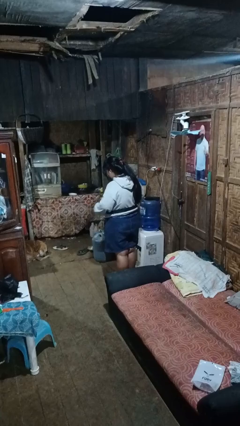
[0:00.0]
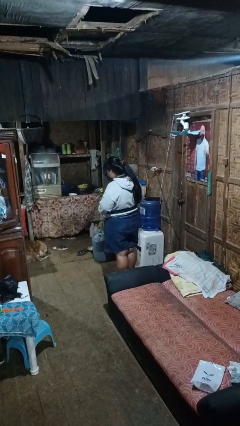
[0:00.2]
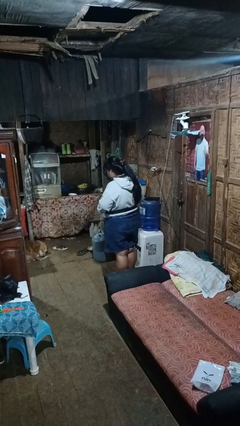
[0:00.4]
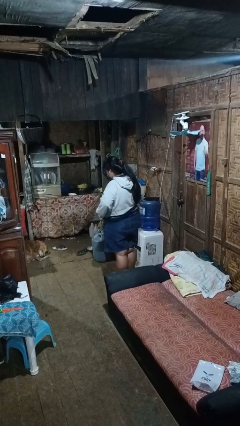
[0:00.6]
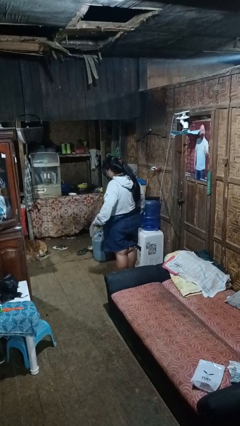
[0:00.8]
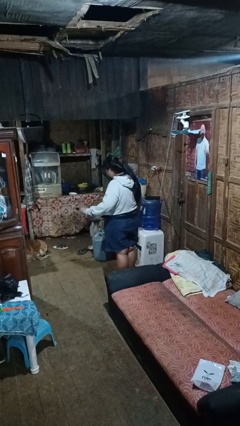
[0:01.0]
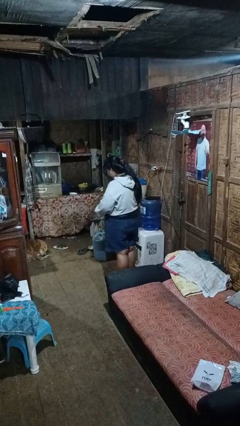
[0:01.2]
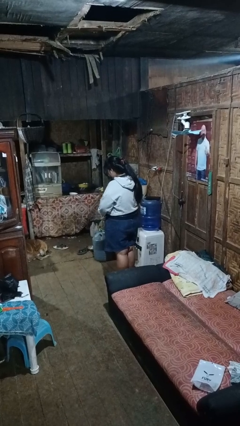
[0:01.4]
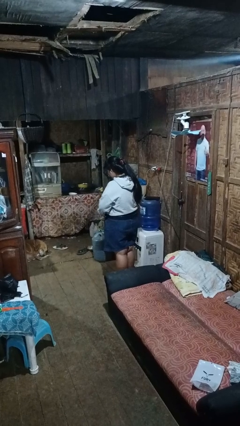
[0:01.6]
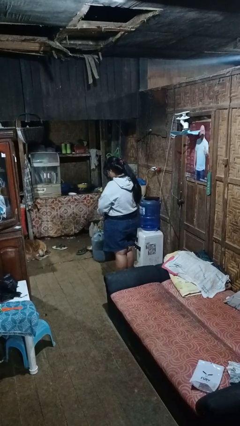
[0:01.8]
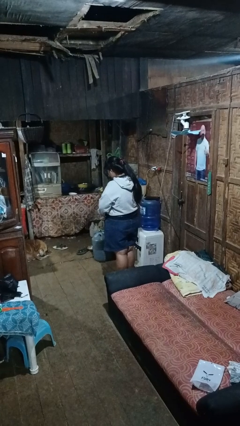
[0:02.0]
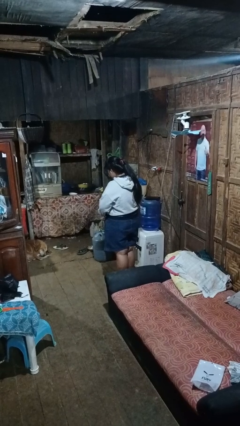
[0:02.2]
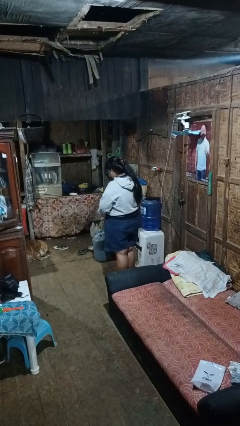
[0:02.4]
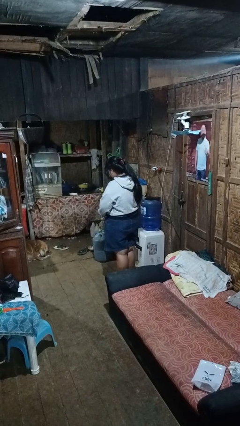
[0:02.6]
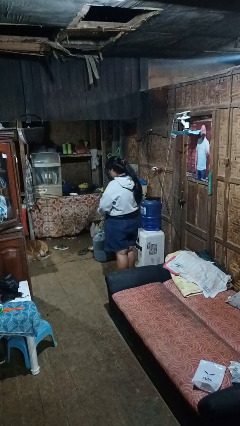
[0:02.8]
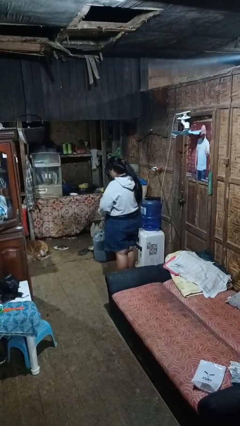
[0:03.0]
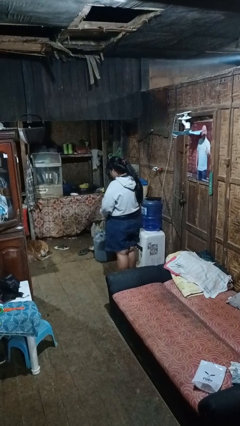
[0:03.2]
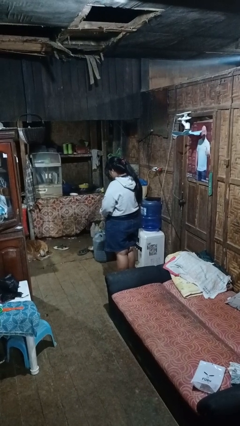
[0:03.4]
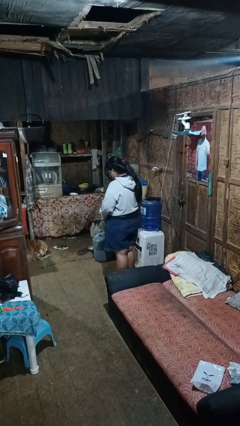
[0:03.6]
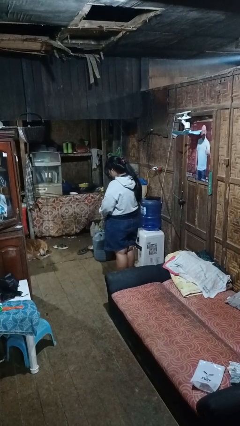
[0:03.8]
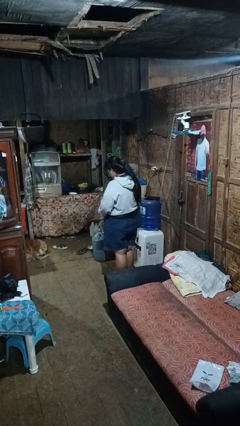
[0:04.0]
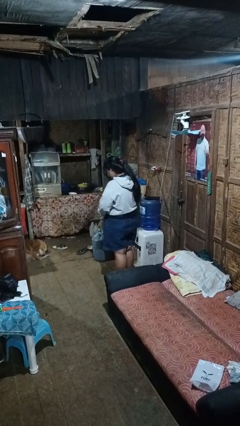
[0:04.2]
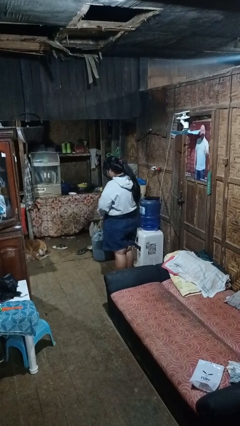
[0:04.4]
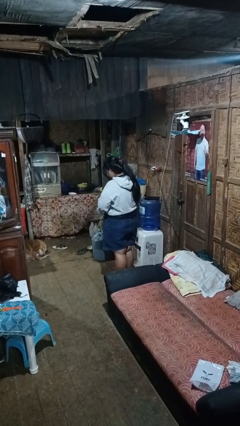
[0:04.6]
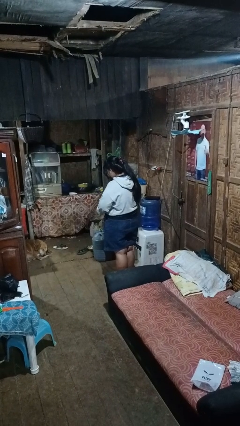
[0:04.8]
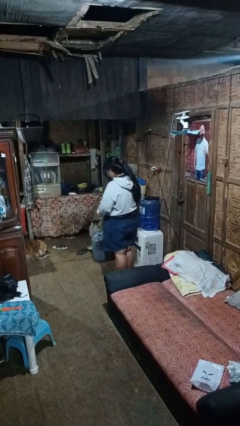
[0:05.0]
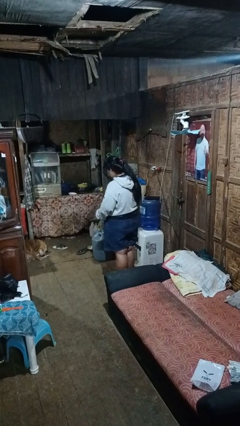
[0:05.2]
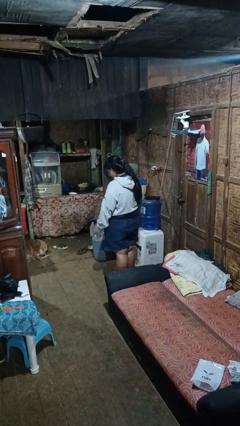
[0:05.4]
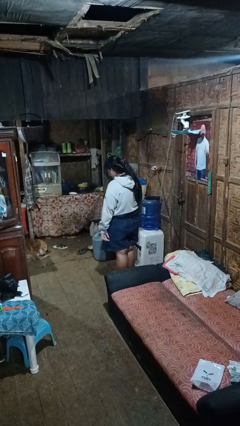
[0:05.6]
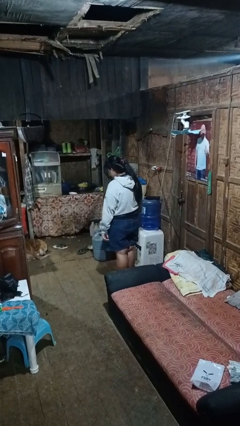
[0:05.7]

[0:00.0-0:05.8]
person puts on belt

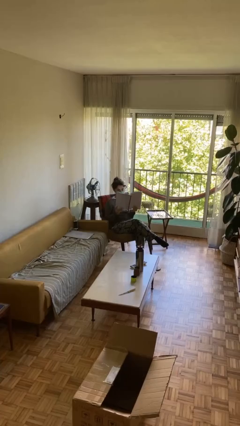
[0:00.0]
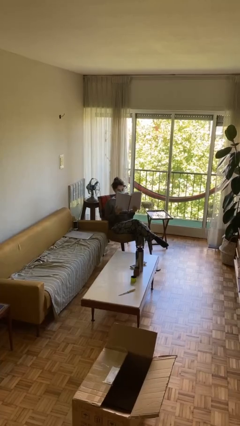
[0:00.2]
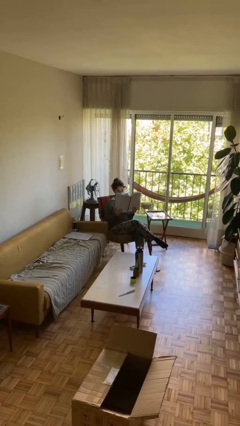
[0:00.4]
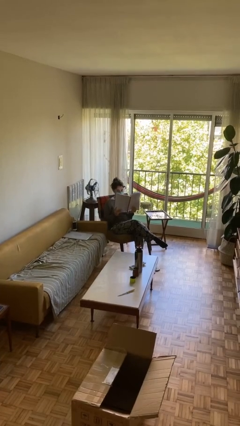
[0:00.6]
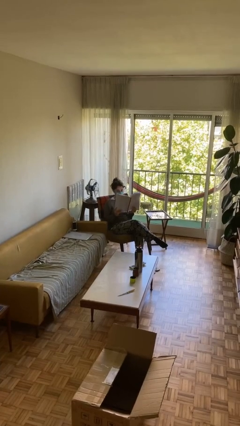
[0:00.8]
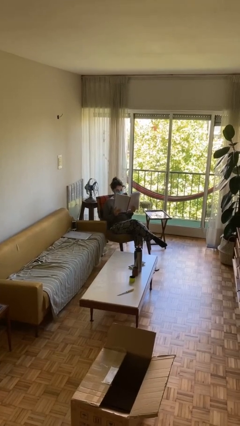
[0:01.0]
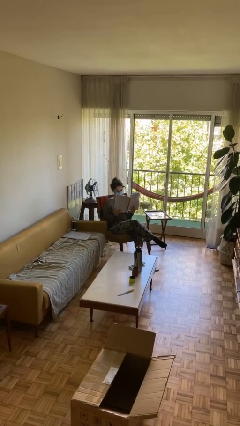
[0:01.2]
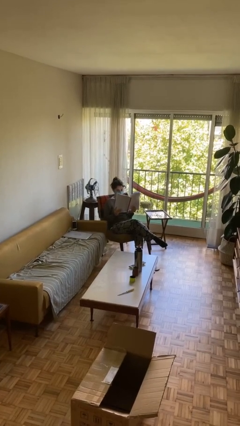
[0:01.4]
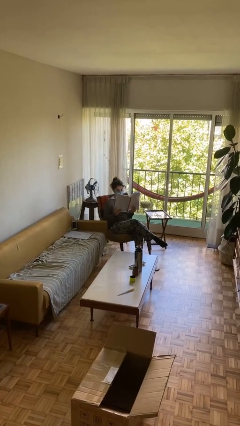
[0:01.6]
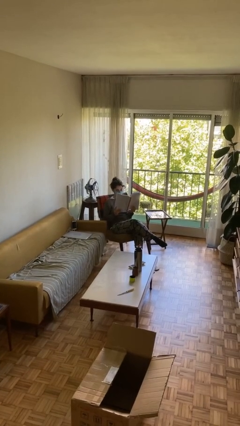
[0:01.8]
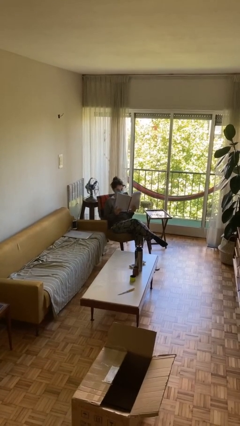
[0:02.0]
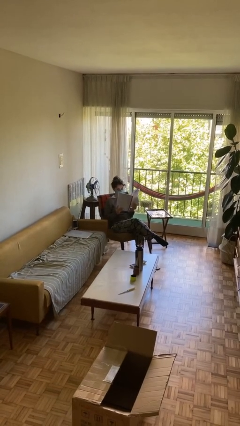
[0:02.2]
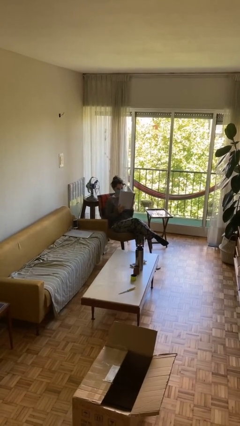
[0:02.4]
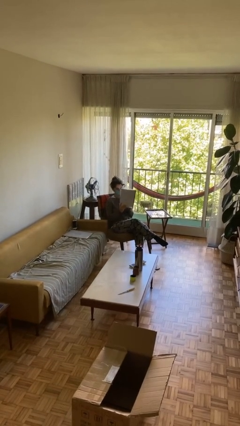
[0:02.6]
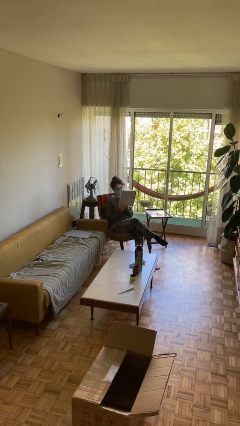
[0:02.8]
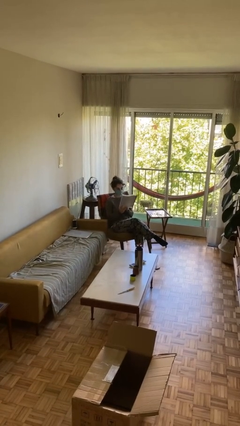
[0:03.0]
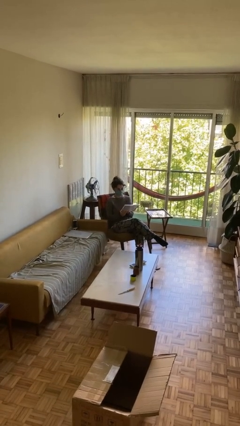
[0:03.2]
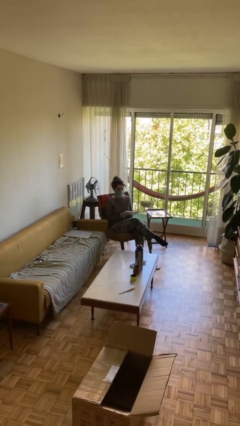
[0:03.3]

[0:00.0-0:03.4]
person reads document

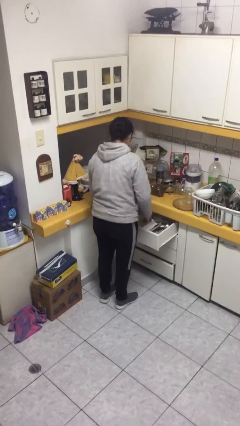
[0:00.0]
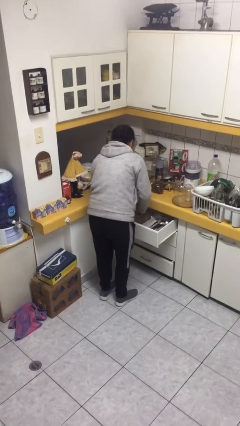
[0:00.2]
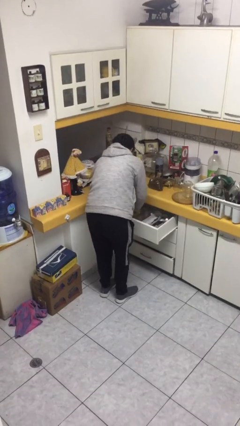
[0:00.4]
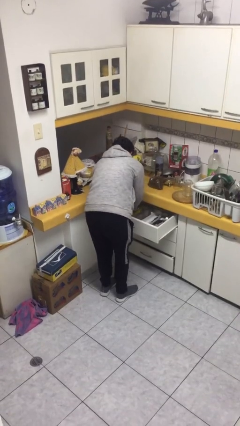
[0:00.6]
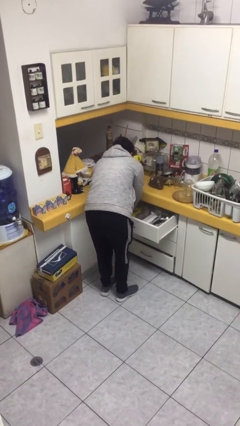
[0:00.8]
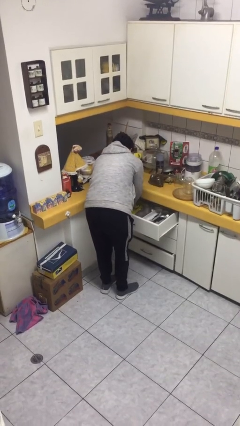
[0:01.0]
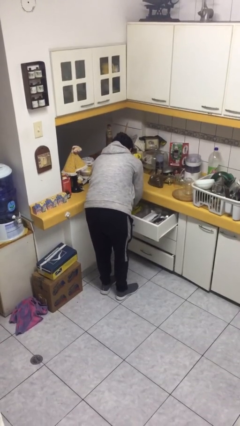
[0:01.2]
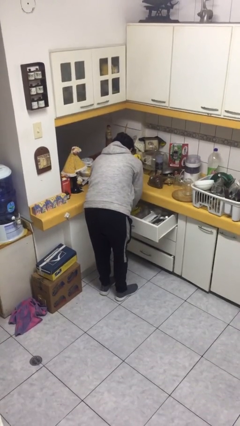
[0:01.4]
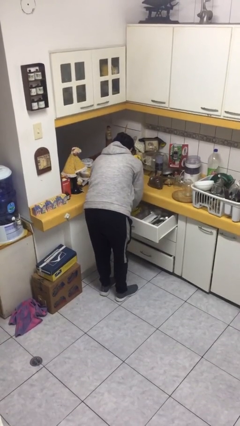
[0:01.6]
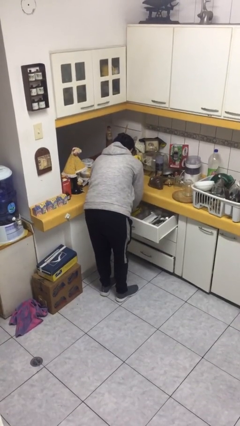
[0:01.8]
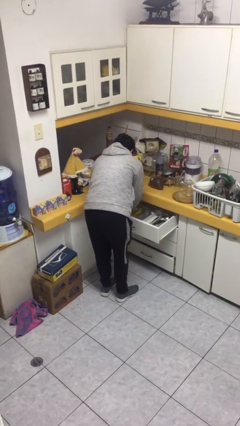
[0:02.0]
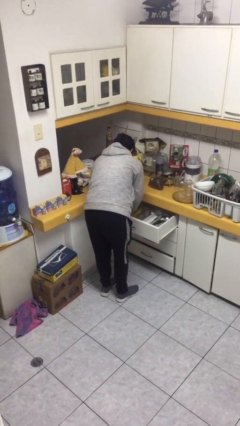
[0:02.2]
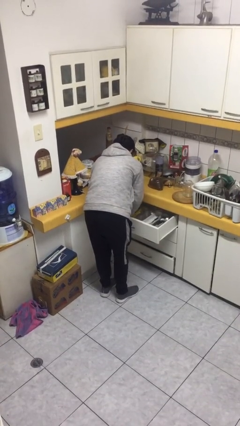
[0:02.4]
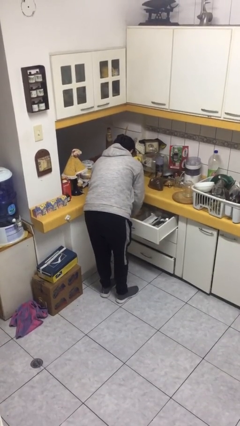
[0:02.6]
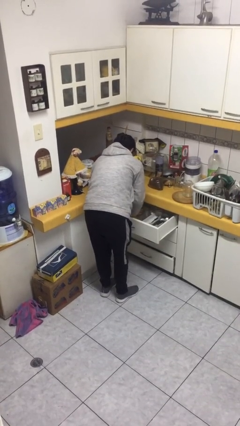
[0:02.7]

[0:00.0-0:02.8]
person searches in kitchen drawer

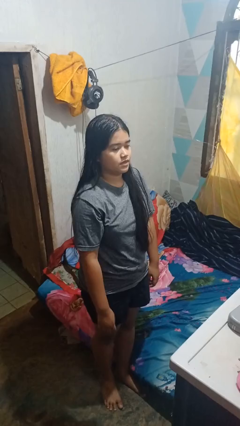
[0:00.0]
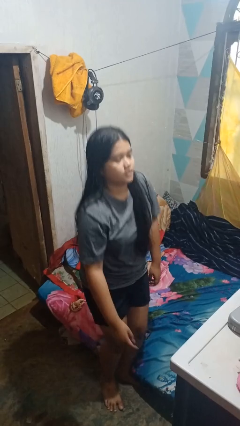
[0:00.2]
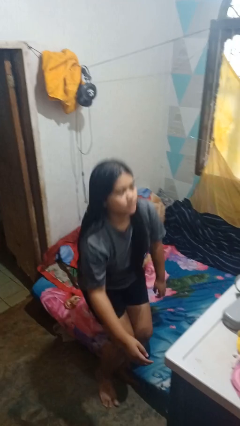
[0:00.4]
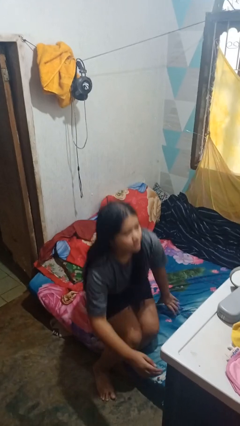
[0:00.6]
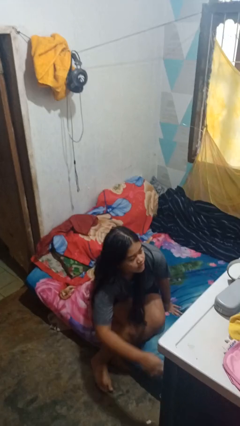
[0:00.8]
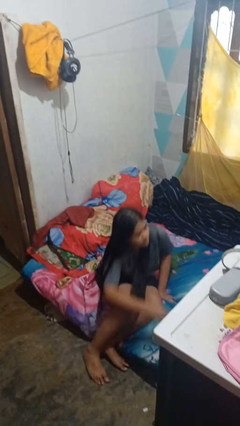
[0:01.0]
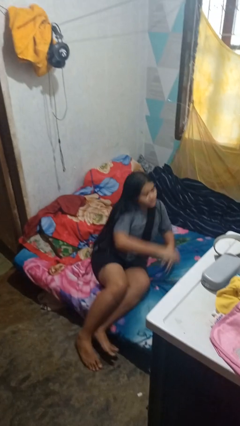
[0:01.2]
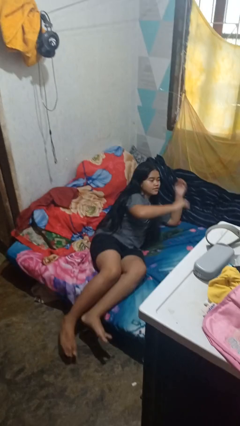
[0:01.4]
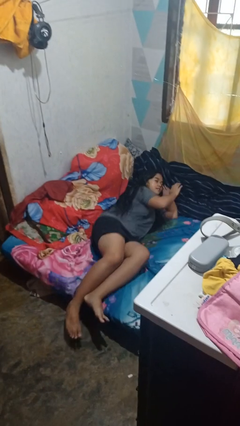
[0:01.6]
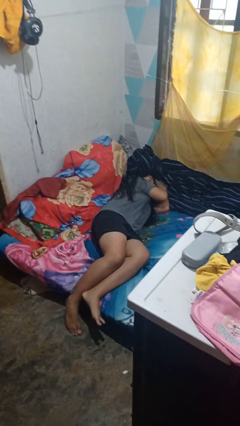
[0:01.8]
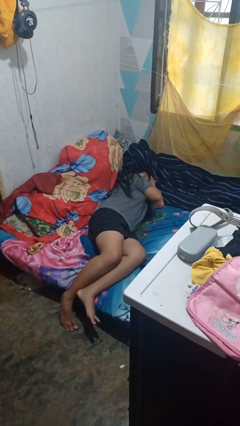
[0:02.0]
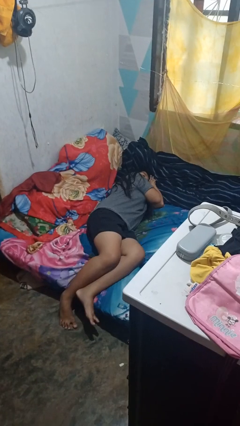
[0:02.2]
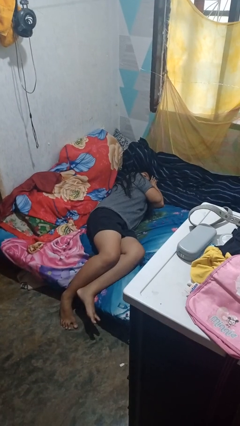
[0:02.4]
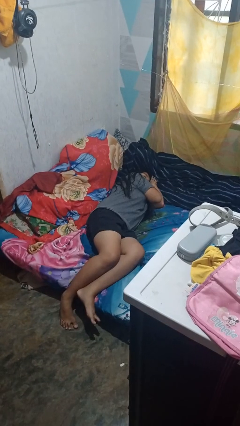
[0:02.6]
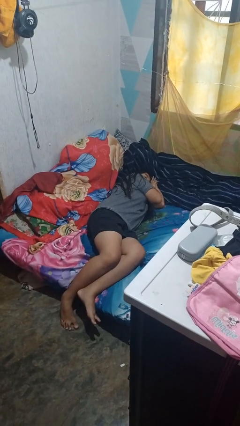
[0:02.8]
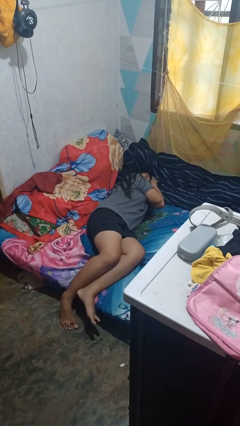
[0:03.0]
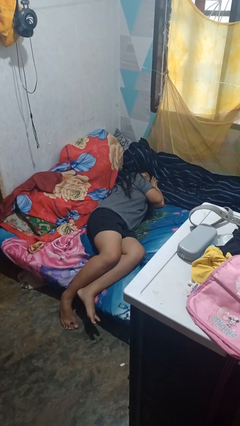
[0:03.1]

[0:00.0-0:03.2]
person lies down on bed

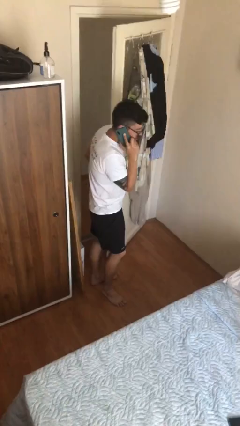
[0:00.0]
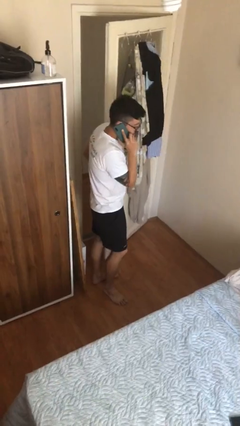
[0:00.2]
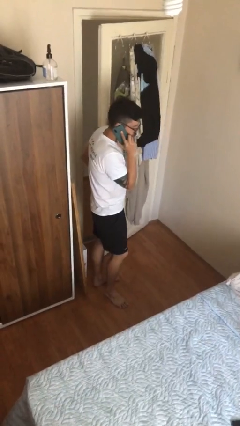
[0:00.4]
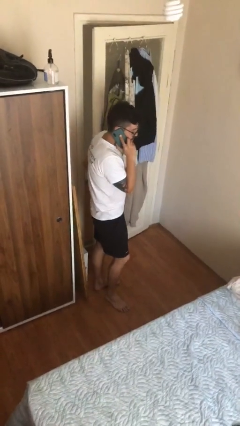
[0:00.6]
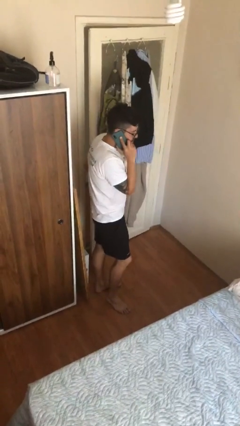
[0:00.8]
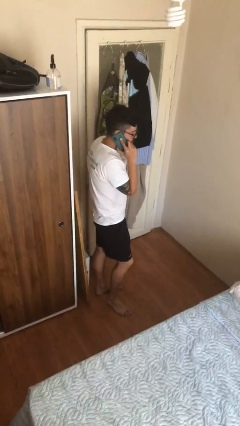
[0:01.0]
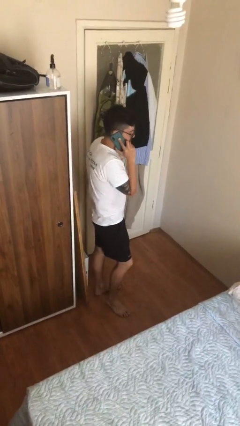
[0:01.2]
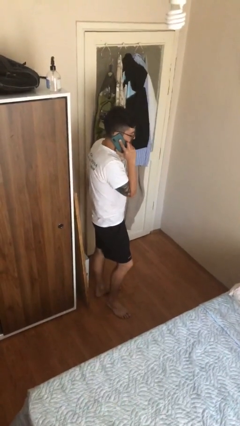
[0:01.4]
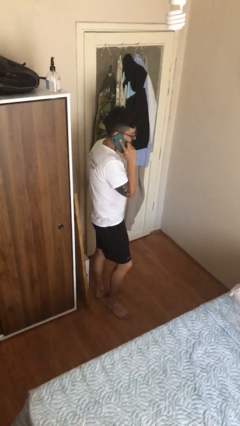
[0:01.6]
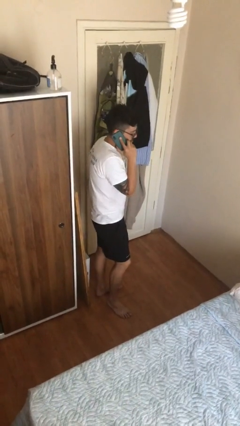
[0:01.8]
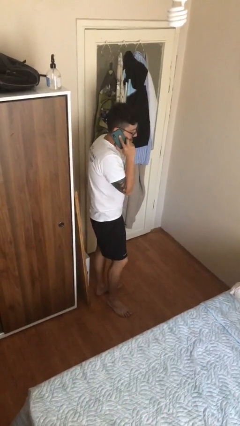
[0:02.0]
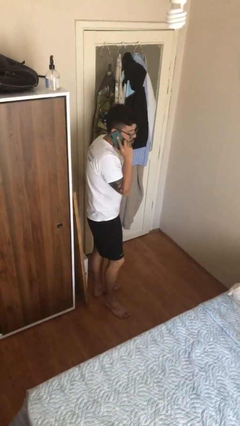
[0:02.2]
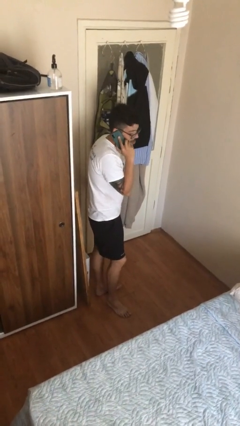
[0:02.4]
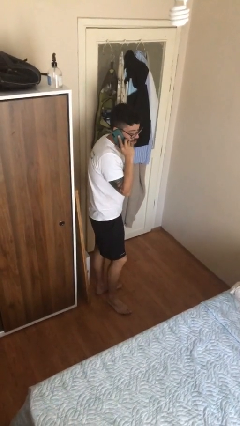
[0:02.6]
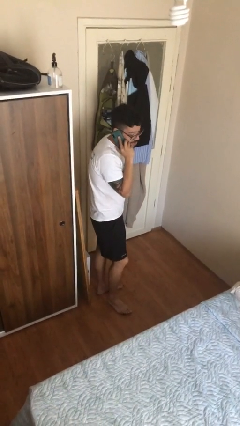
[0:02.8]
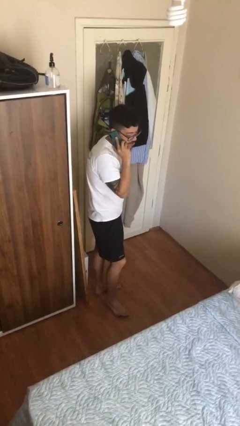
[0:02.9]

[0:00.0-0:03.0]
person closes facility door
